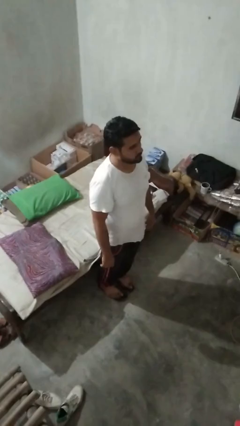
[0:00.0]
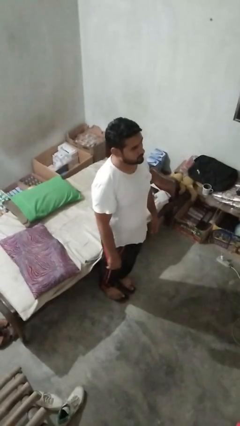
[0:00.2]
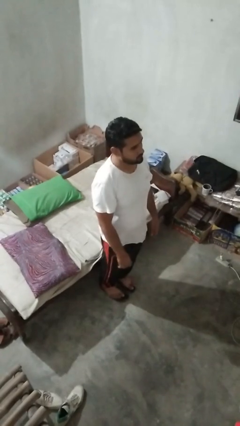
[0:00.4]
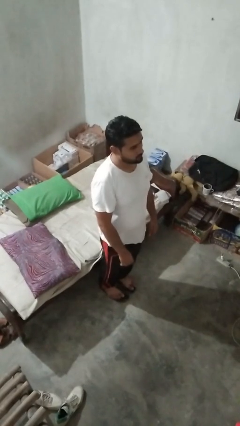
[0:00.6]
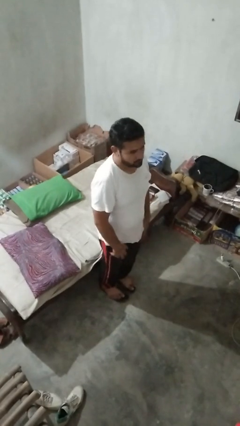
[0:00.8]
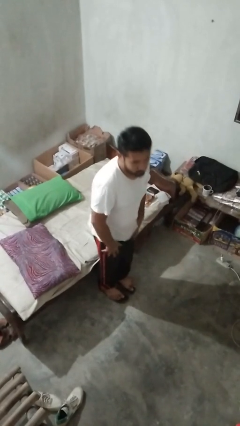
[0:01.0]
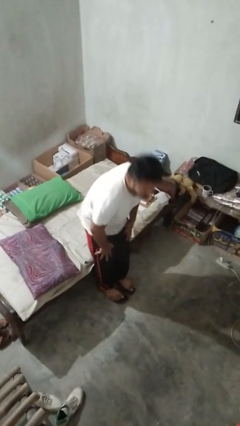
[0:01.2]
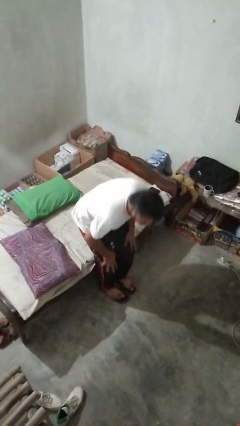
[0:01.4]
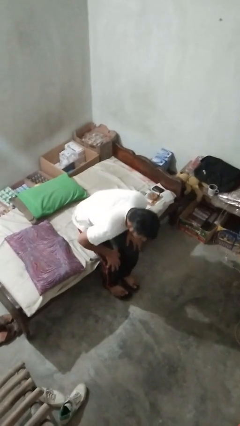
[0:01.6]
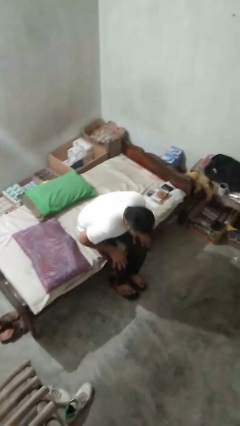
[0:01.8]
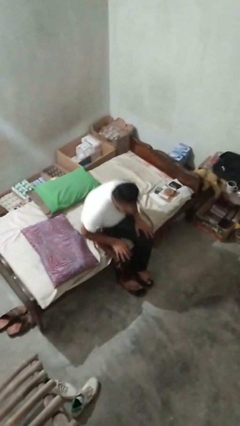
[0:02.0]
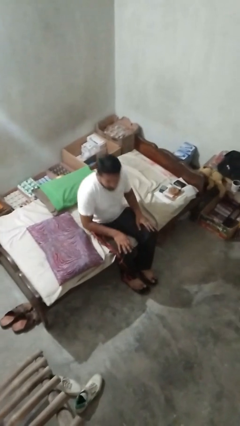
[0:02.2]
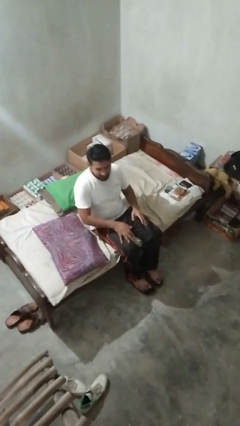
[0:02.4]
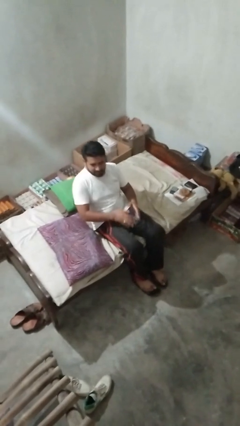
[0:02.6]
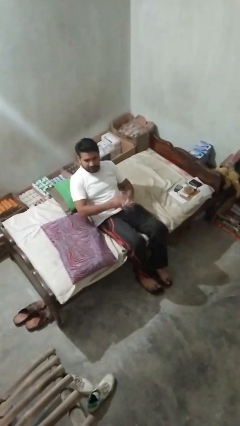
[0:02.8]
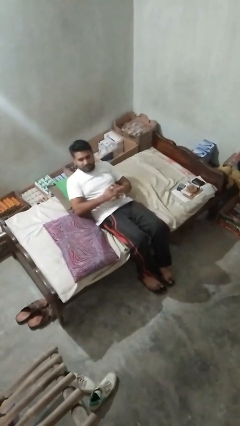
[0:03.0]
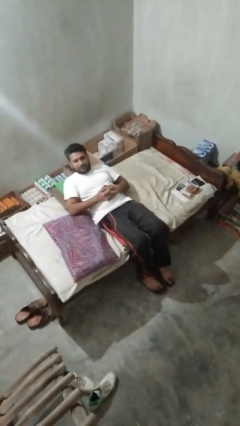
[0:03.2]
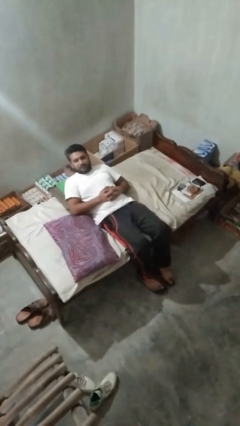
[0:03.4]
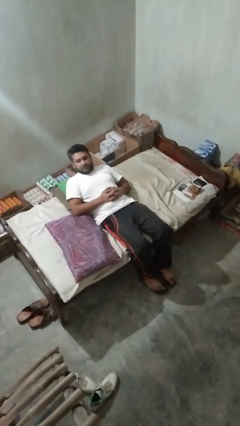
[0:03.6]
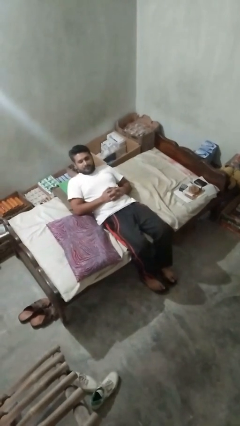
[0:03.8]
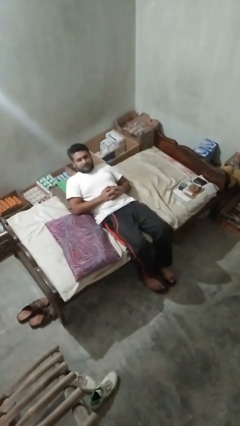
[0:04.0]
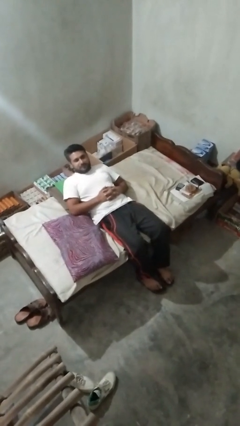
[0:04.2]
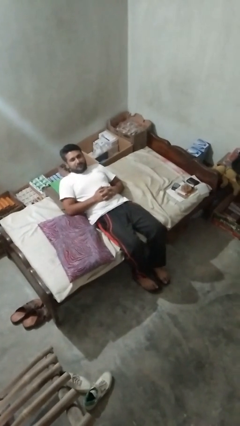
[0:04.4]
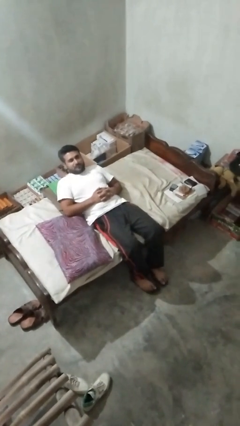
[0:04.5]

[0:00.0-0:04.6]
person lies down on couch

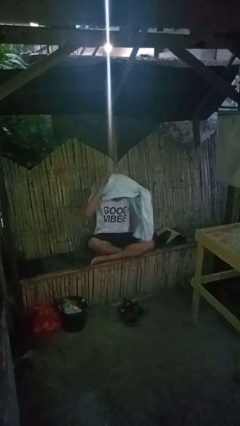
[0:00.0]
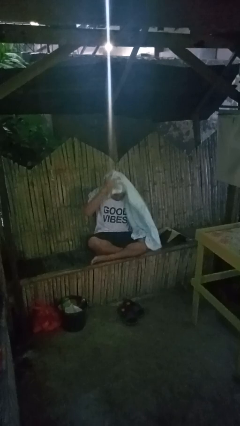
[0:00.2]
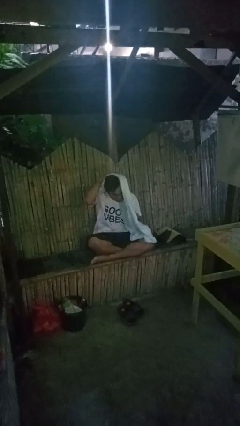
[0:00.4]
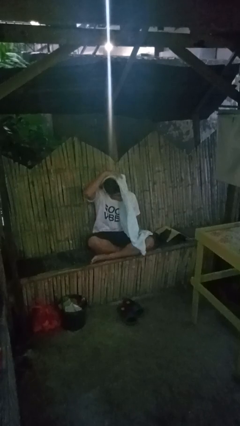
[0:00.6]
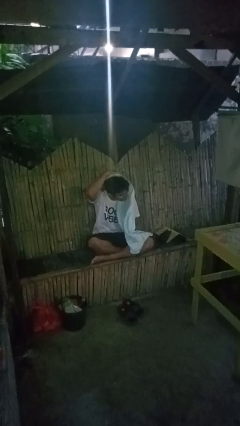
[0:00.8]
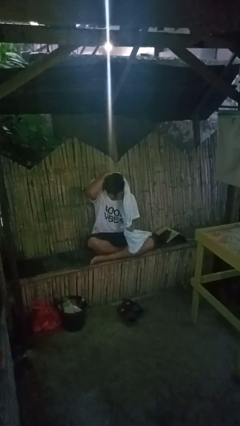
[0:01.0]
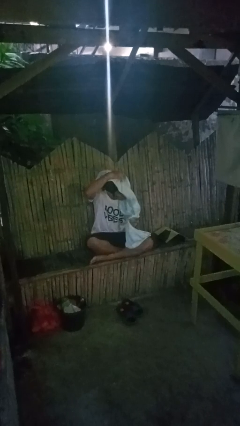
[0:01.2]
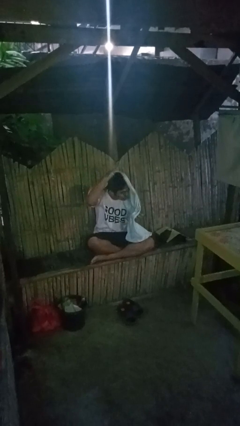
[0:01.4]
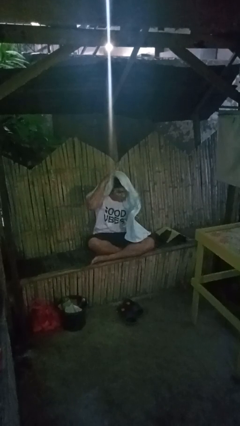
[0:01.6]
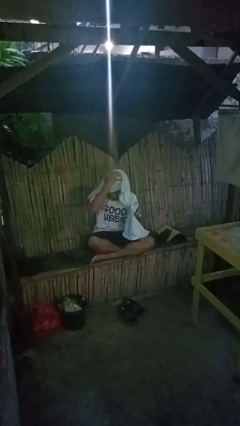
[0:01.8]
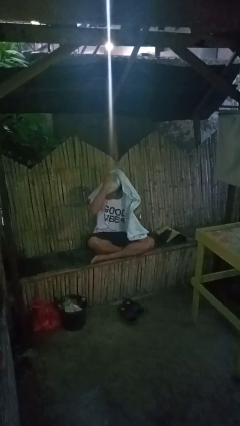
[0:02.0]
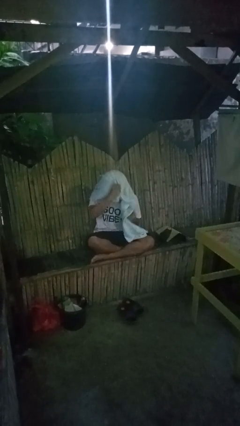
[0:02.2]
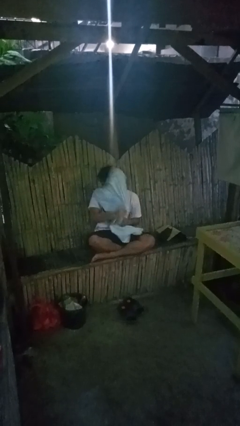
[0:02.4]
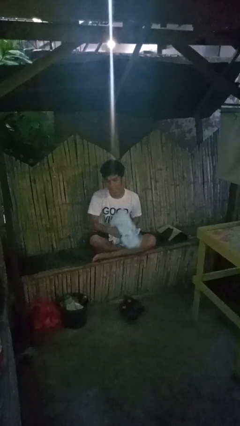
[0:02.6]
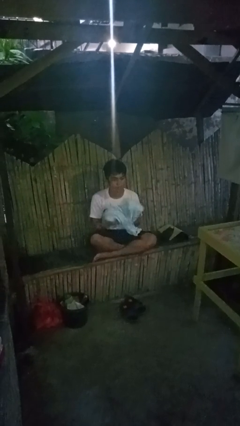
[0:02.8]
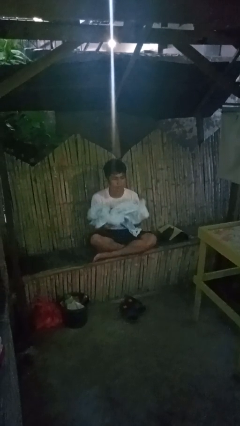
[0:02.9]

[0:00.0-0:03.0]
person dries hair with towel

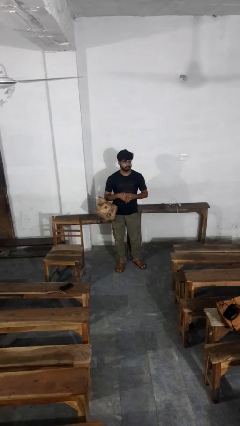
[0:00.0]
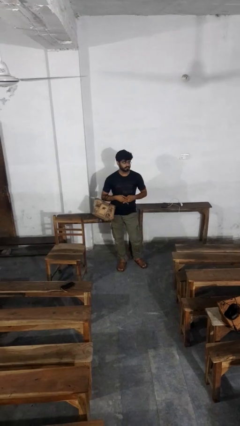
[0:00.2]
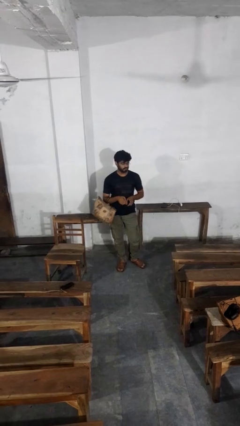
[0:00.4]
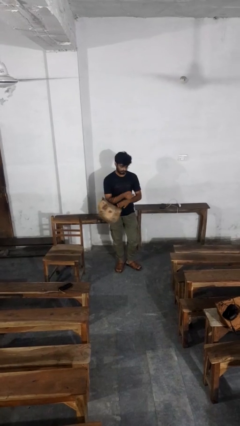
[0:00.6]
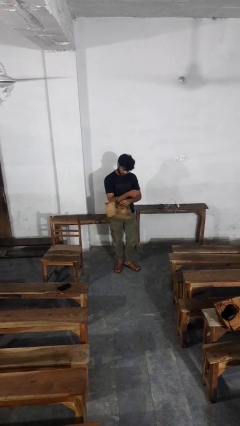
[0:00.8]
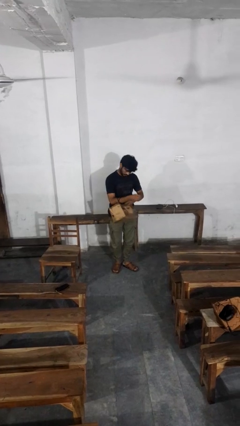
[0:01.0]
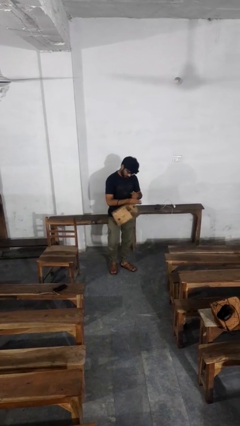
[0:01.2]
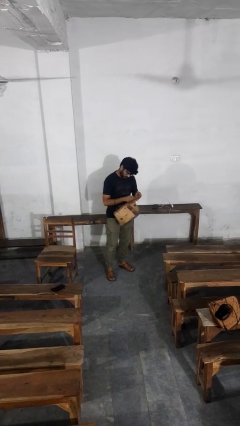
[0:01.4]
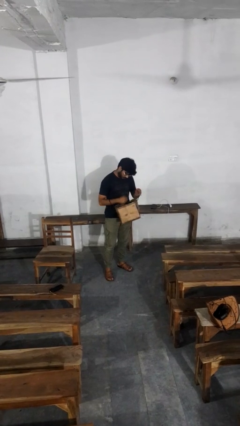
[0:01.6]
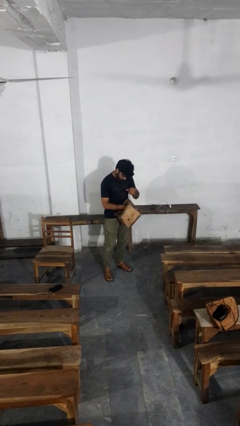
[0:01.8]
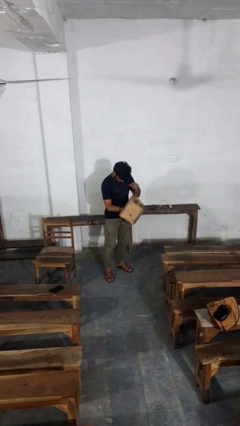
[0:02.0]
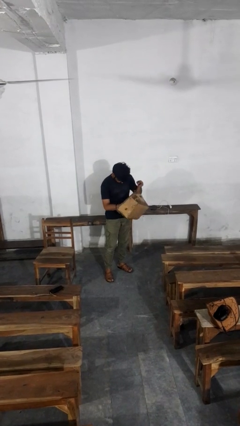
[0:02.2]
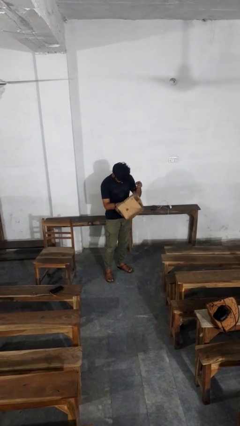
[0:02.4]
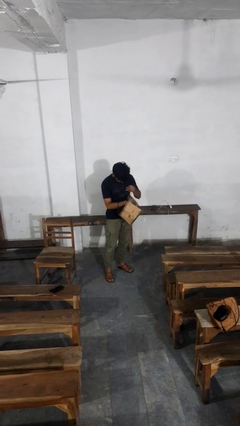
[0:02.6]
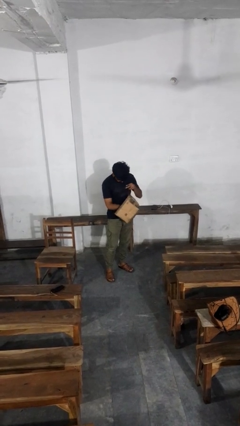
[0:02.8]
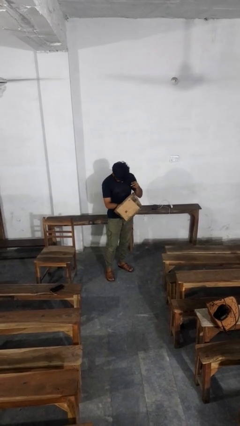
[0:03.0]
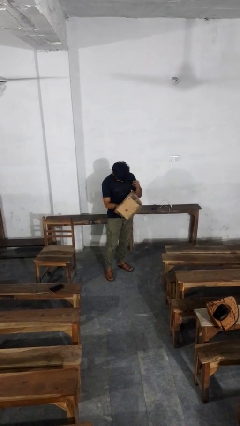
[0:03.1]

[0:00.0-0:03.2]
person searches in purse

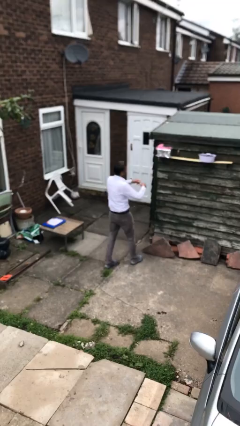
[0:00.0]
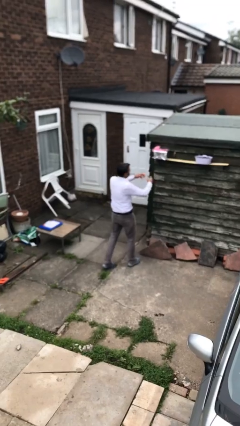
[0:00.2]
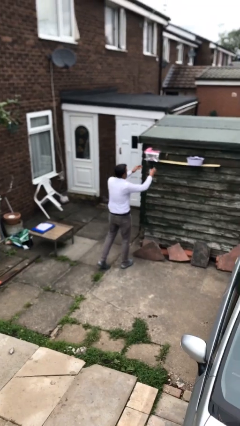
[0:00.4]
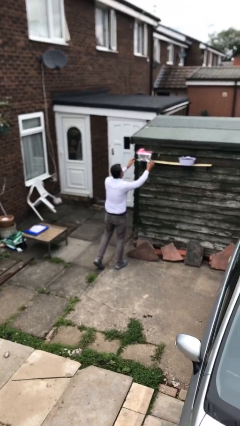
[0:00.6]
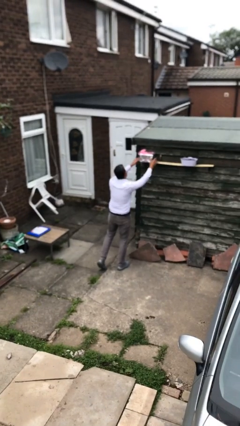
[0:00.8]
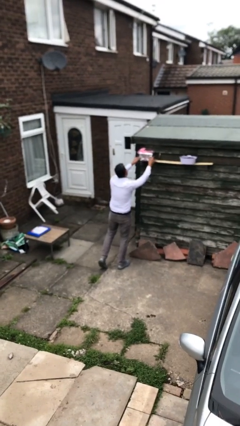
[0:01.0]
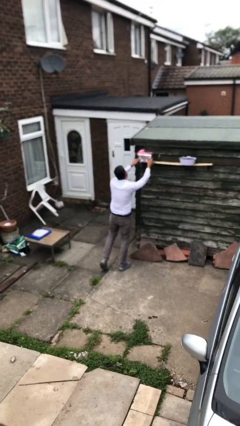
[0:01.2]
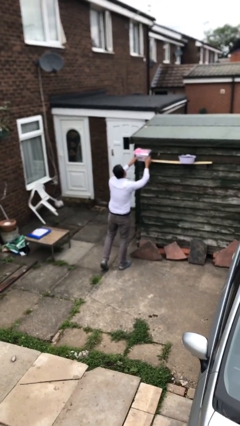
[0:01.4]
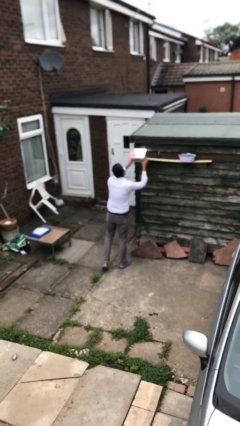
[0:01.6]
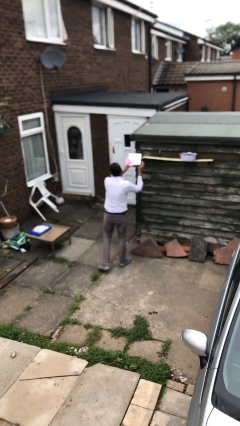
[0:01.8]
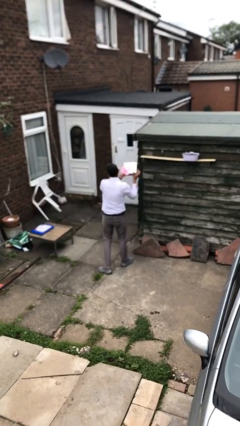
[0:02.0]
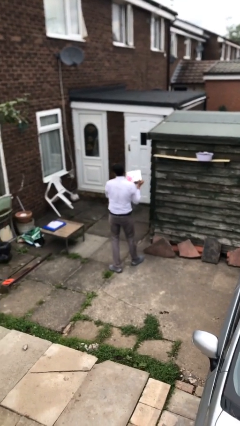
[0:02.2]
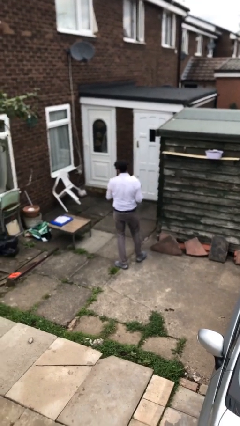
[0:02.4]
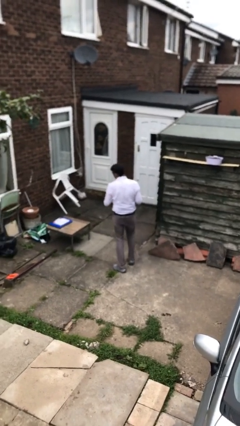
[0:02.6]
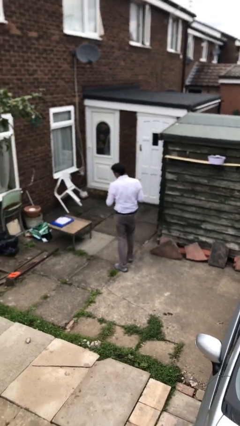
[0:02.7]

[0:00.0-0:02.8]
person picks up object from shelf

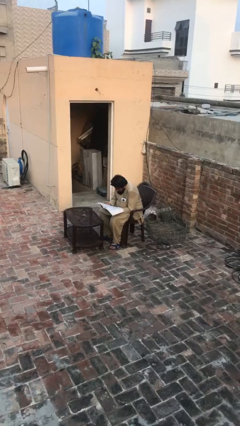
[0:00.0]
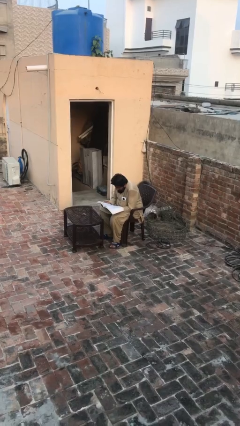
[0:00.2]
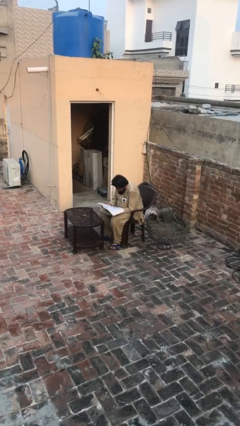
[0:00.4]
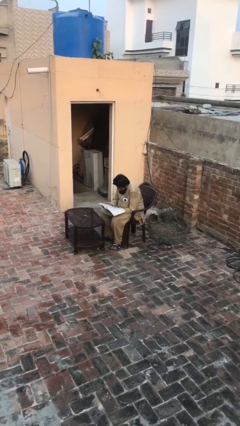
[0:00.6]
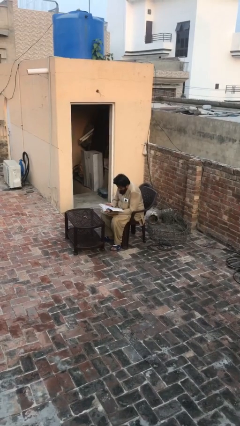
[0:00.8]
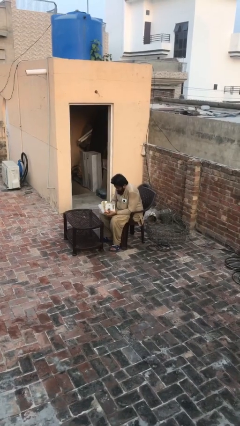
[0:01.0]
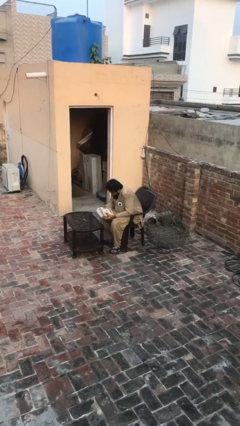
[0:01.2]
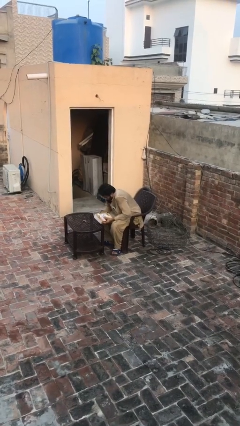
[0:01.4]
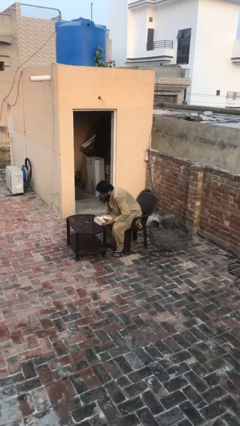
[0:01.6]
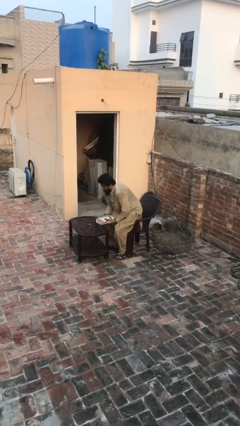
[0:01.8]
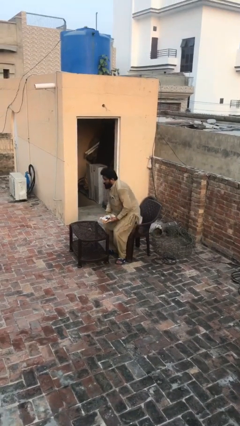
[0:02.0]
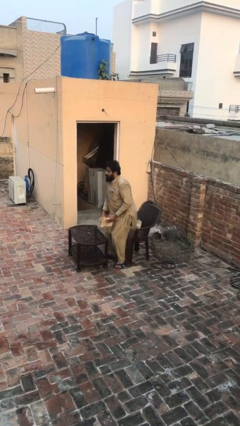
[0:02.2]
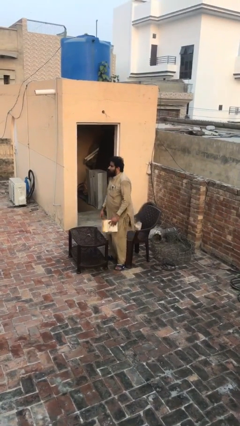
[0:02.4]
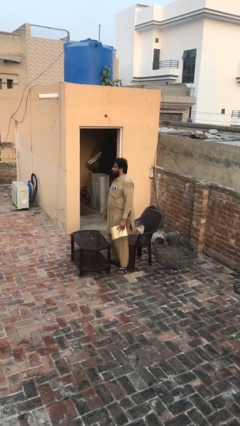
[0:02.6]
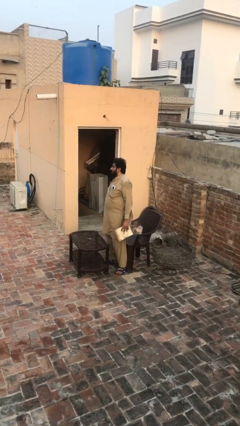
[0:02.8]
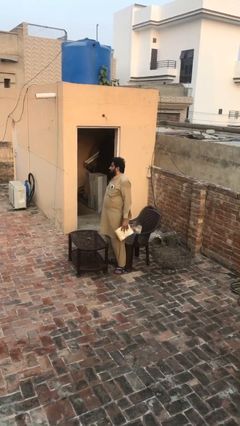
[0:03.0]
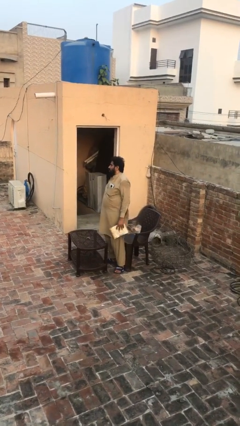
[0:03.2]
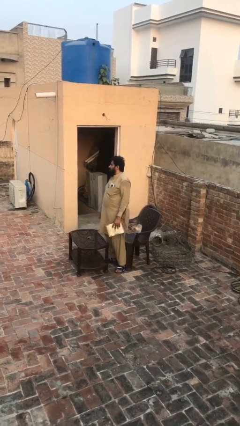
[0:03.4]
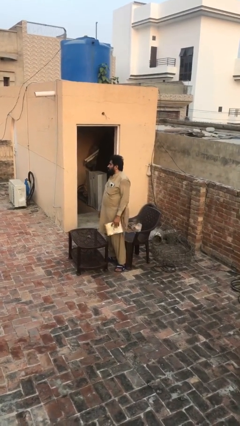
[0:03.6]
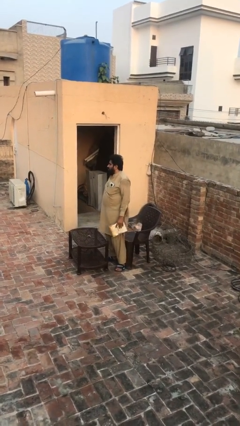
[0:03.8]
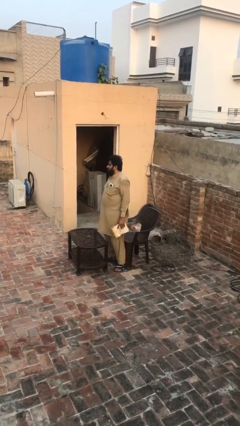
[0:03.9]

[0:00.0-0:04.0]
person stands up
